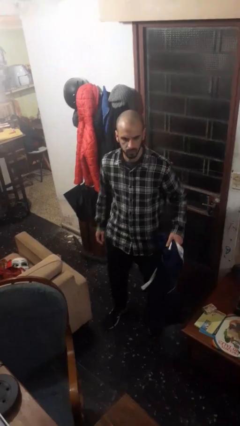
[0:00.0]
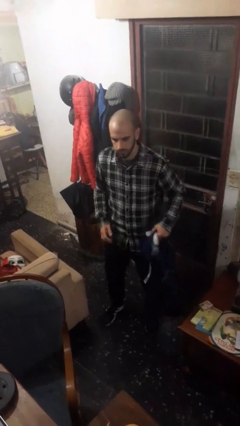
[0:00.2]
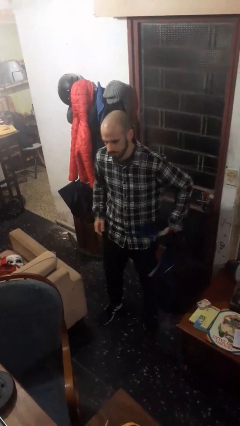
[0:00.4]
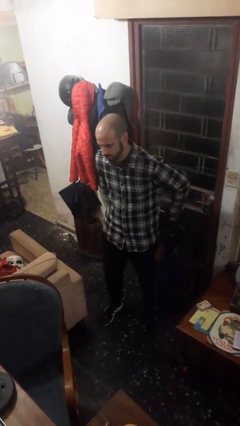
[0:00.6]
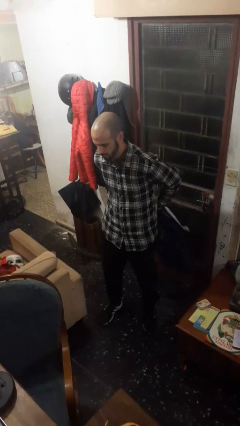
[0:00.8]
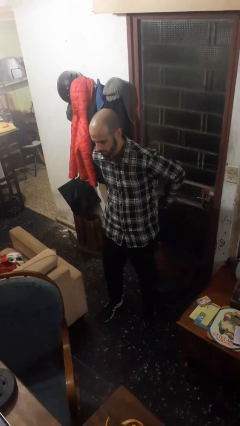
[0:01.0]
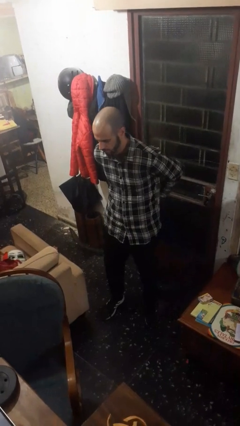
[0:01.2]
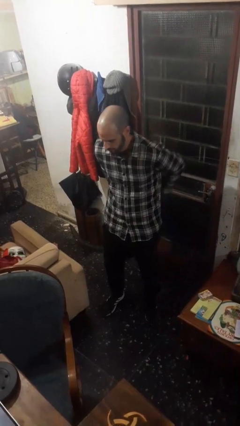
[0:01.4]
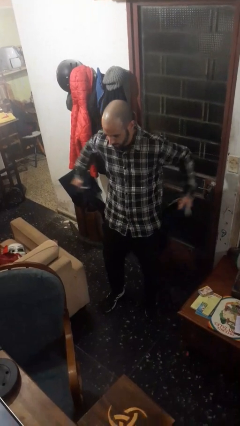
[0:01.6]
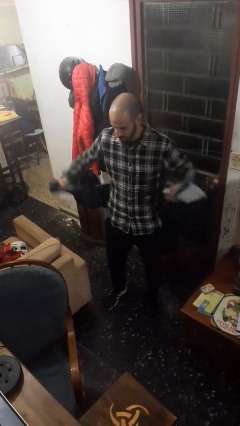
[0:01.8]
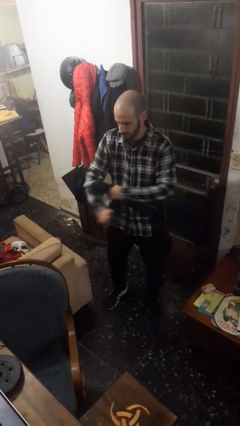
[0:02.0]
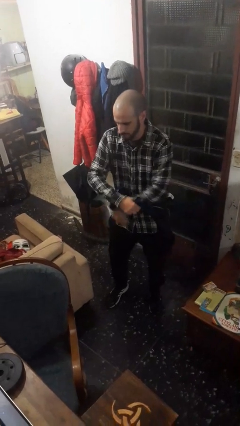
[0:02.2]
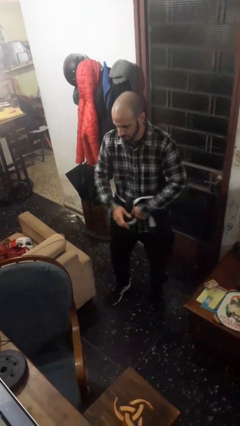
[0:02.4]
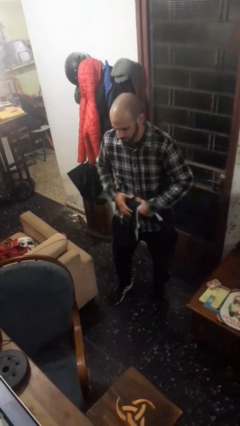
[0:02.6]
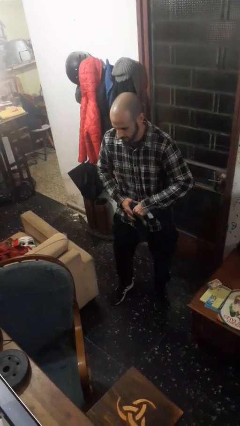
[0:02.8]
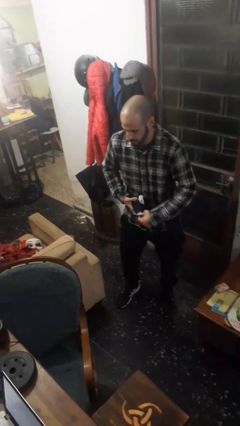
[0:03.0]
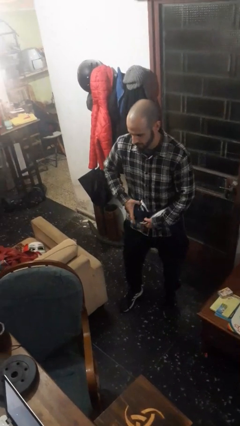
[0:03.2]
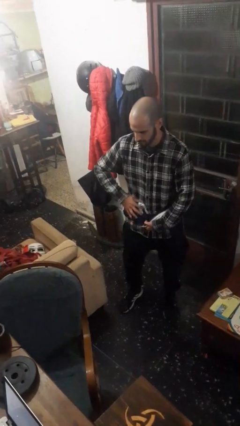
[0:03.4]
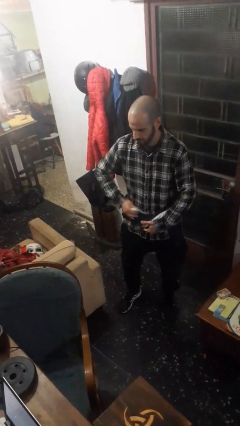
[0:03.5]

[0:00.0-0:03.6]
person ties jacket around waist

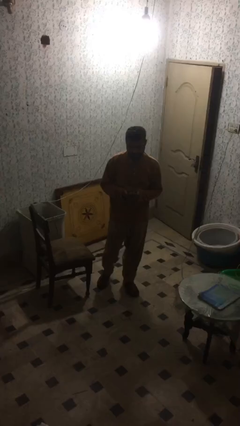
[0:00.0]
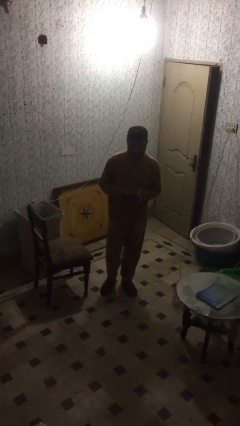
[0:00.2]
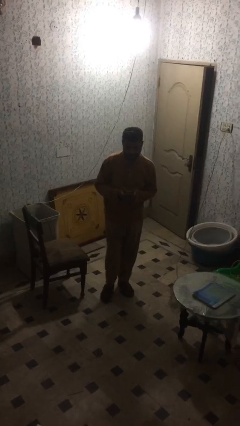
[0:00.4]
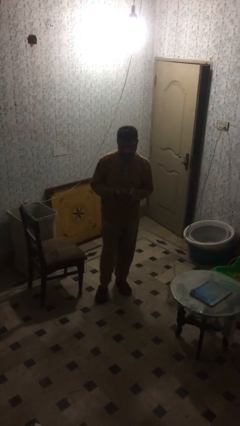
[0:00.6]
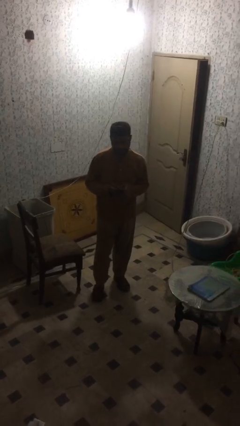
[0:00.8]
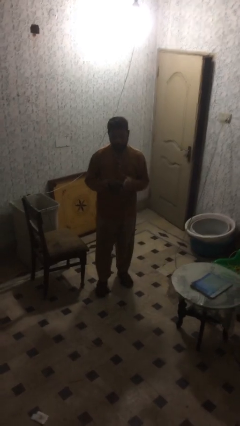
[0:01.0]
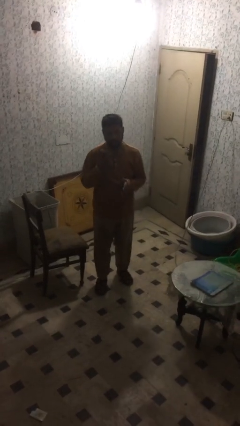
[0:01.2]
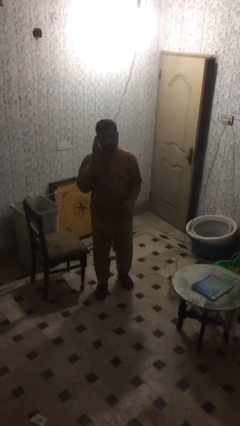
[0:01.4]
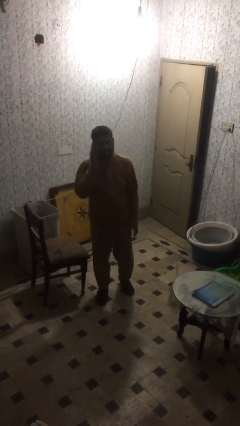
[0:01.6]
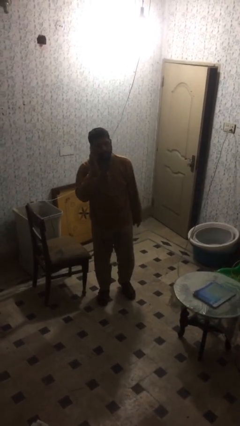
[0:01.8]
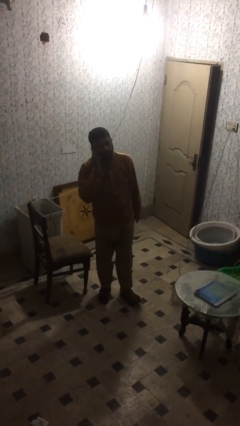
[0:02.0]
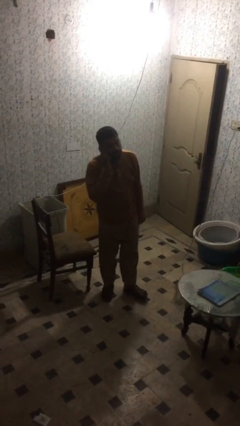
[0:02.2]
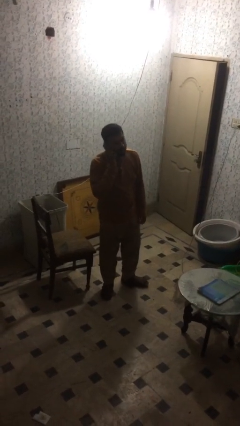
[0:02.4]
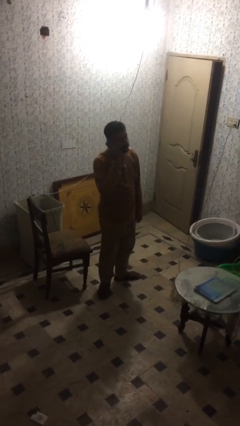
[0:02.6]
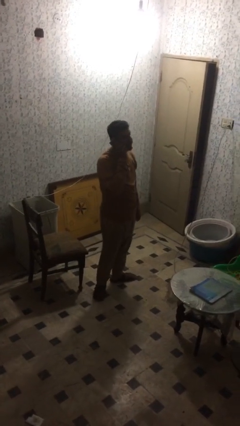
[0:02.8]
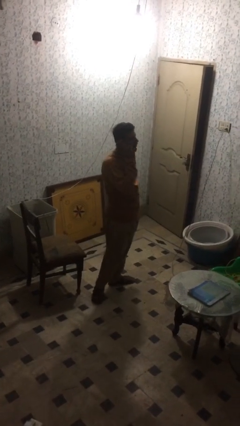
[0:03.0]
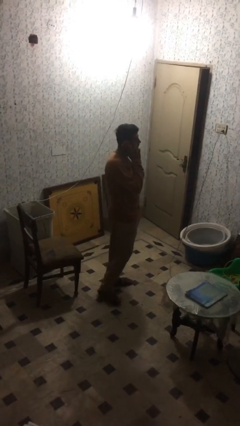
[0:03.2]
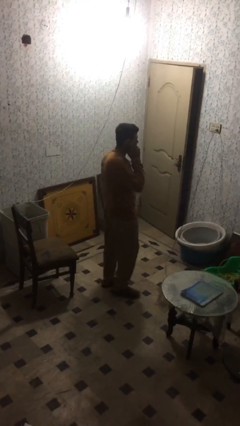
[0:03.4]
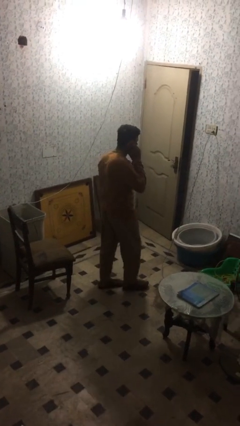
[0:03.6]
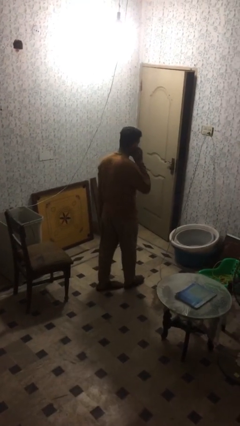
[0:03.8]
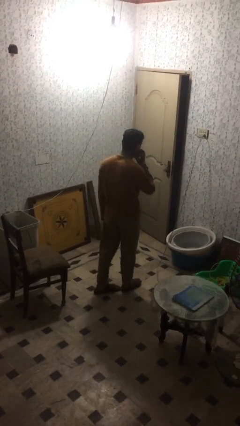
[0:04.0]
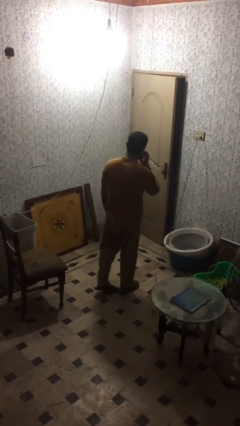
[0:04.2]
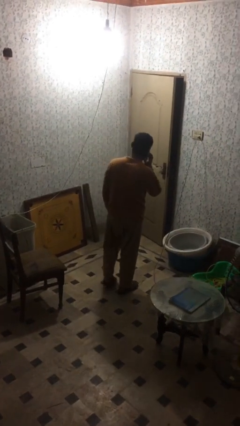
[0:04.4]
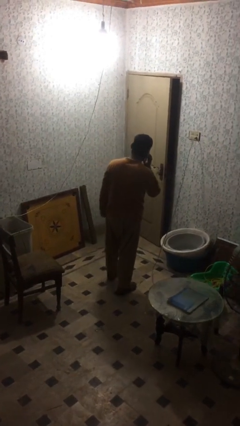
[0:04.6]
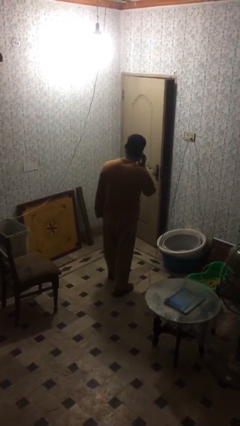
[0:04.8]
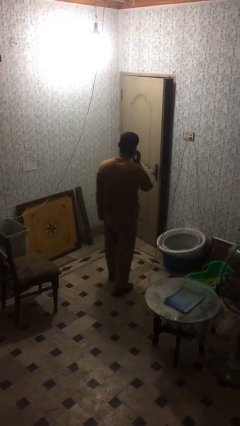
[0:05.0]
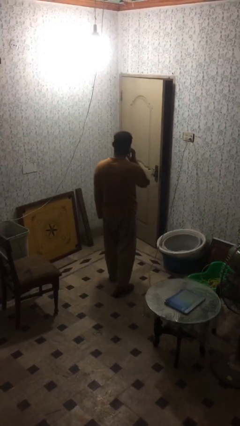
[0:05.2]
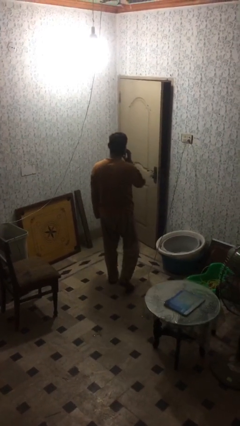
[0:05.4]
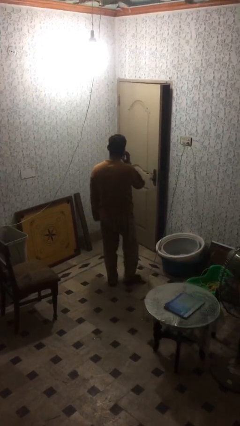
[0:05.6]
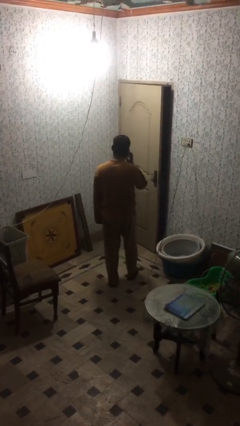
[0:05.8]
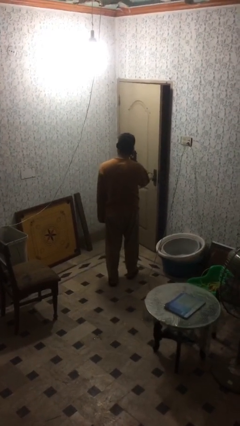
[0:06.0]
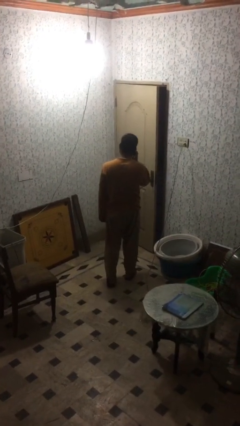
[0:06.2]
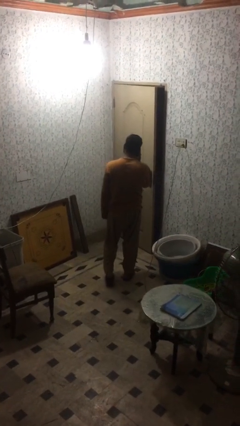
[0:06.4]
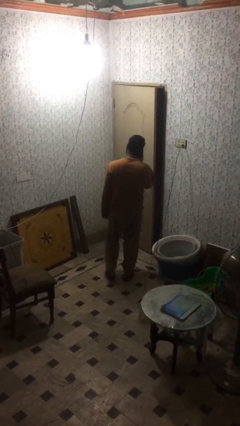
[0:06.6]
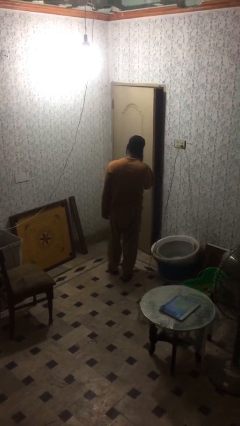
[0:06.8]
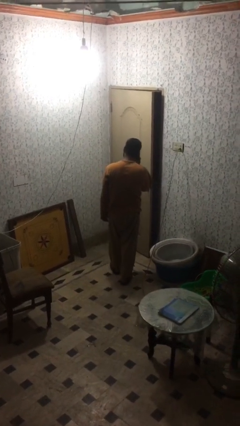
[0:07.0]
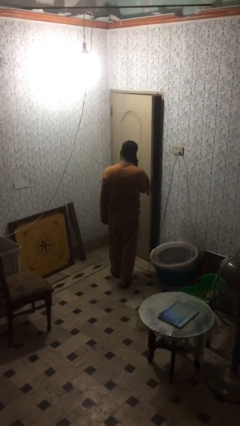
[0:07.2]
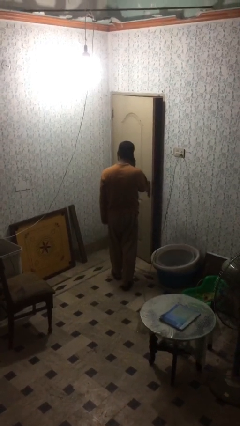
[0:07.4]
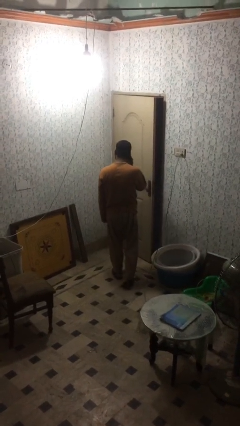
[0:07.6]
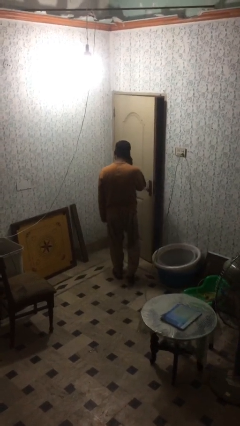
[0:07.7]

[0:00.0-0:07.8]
person talks on phone

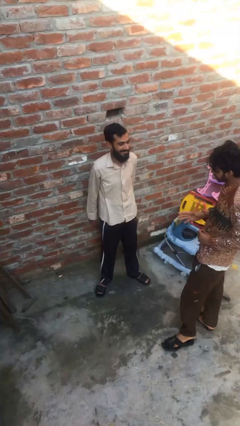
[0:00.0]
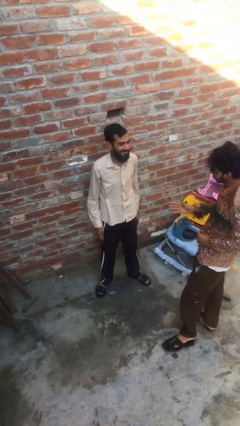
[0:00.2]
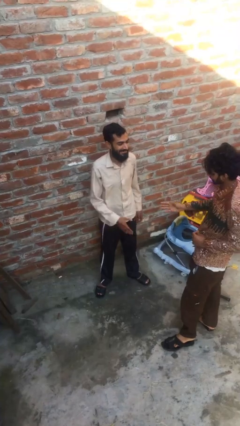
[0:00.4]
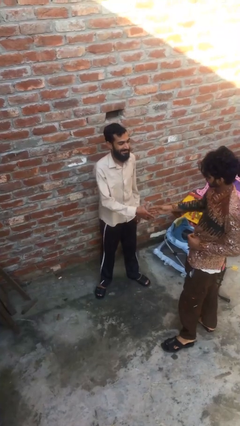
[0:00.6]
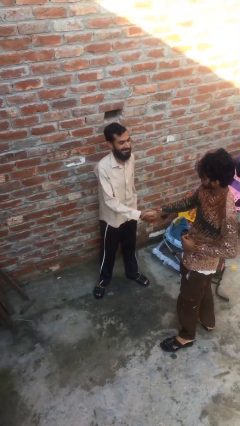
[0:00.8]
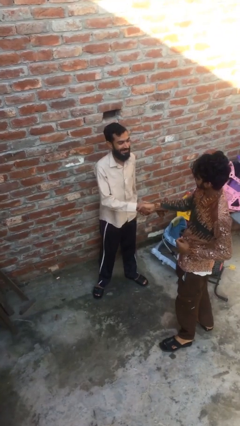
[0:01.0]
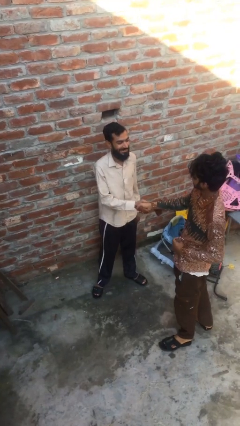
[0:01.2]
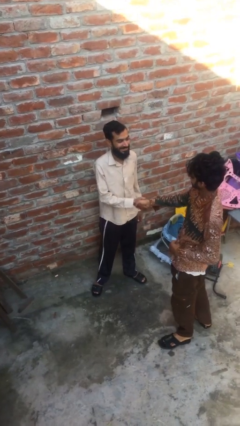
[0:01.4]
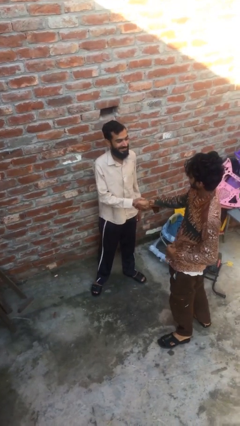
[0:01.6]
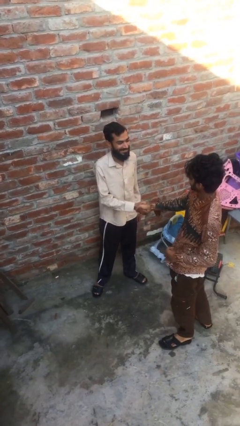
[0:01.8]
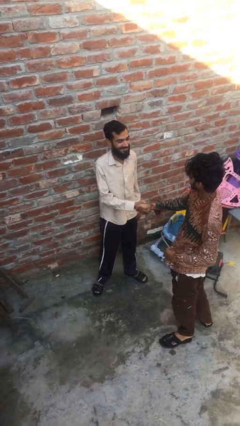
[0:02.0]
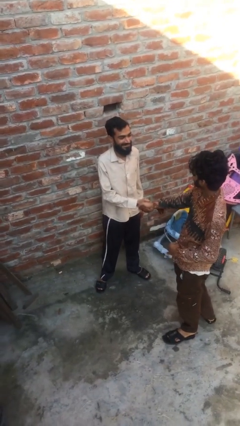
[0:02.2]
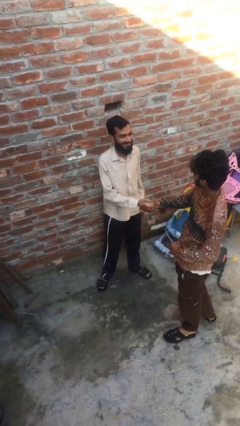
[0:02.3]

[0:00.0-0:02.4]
person shakes hand

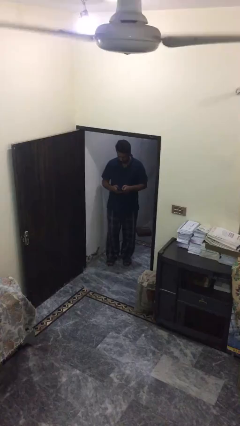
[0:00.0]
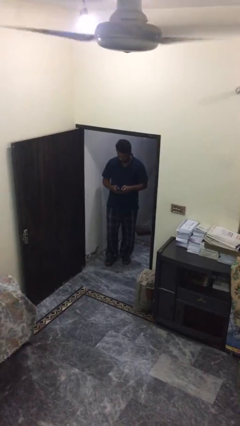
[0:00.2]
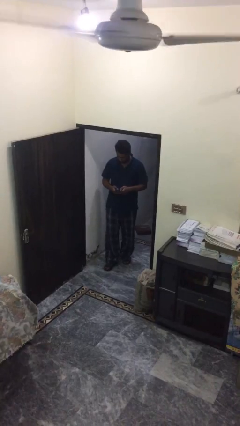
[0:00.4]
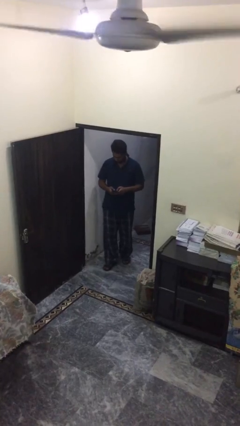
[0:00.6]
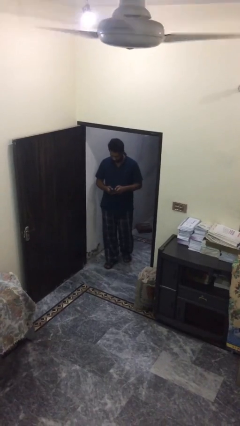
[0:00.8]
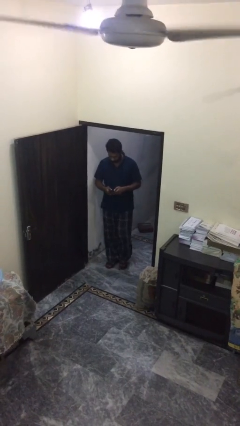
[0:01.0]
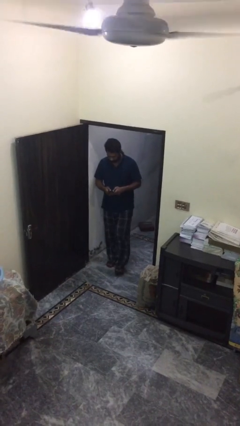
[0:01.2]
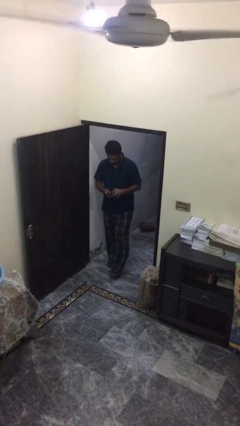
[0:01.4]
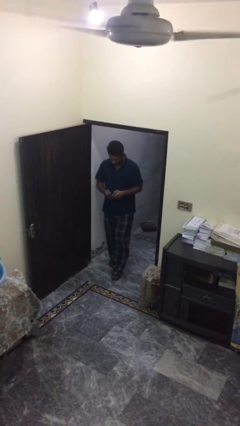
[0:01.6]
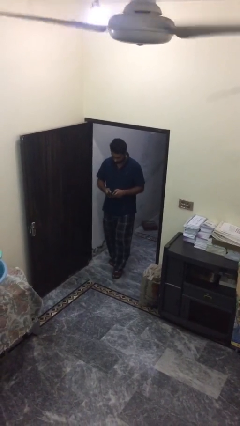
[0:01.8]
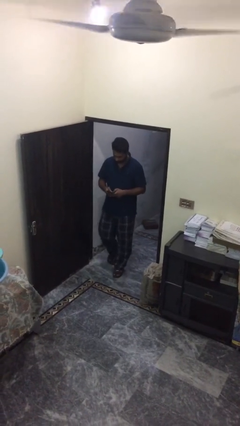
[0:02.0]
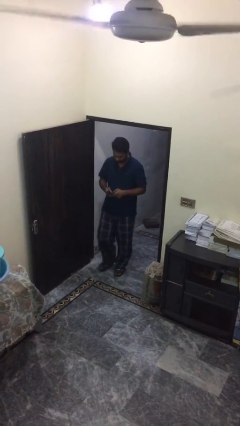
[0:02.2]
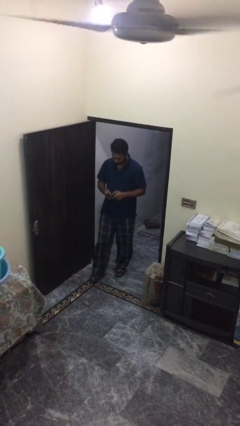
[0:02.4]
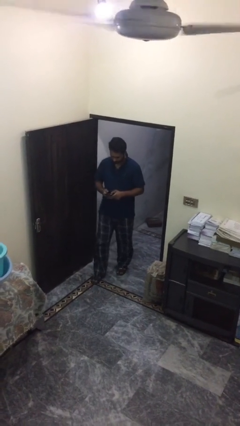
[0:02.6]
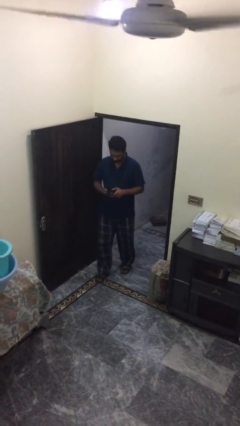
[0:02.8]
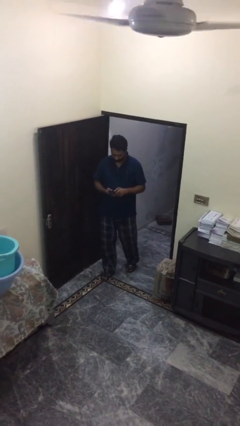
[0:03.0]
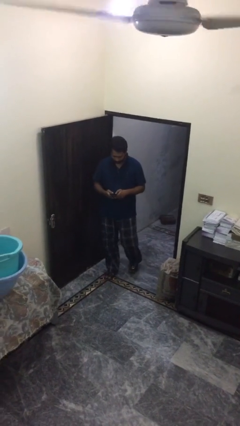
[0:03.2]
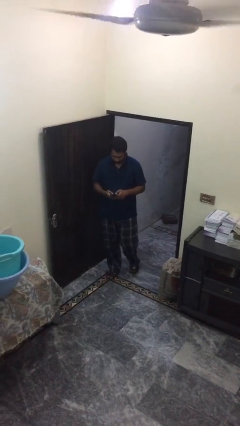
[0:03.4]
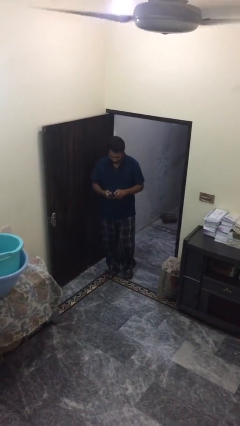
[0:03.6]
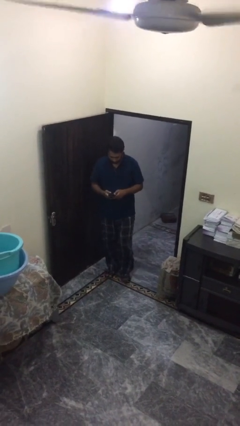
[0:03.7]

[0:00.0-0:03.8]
person texts on phone

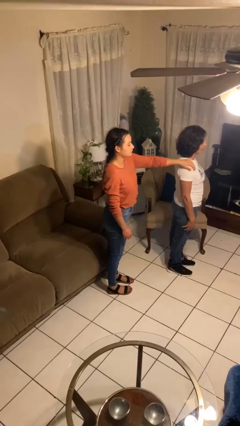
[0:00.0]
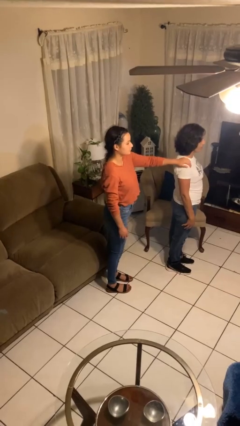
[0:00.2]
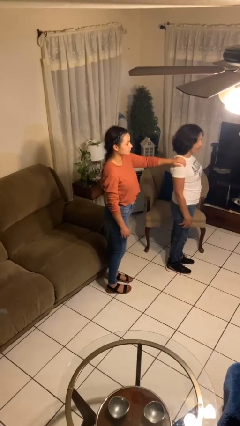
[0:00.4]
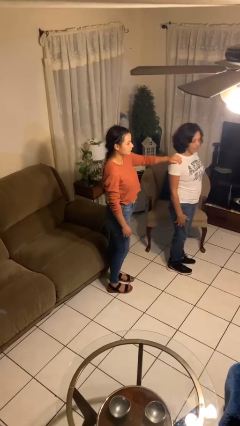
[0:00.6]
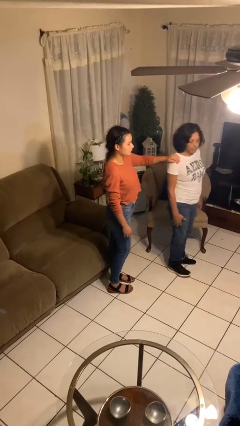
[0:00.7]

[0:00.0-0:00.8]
person grabs person by shoulder
